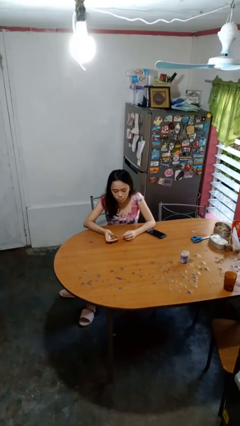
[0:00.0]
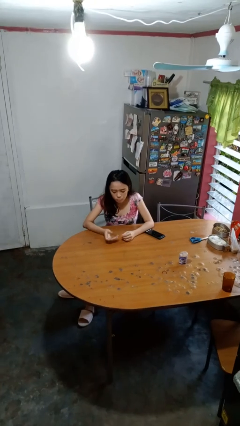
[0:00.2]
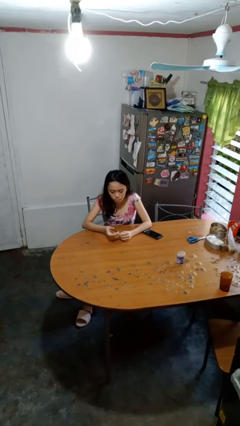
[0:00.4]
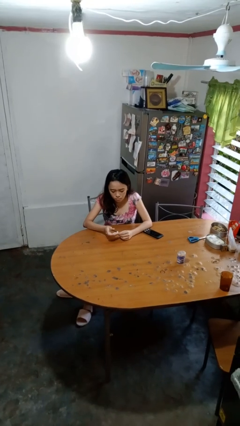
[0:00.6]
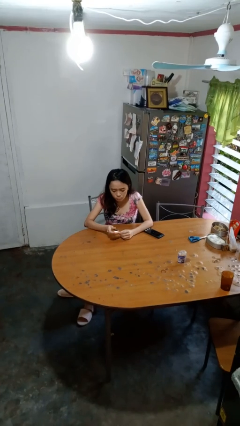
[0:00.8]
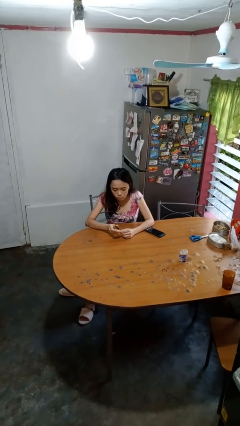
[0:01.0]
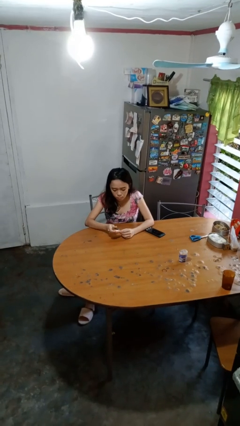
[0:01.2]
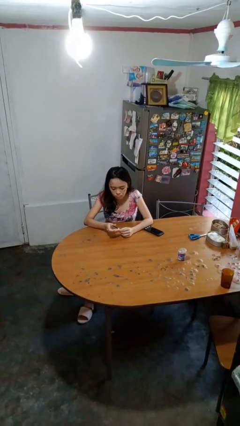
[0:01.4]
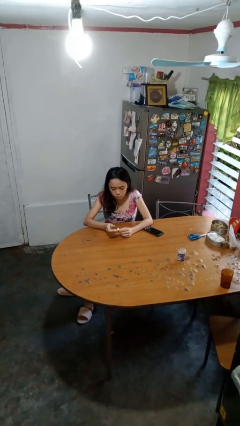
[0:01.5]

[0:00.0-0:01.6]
person clips fingernails

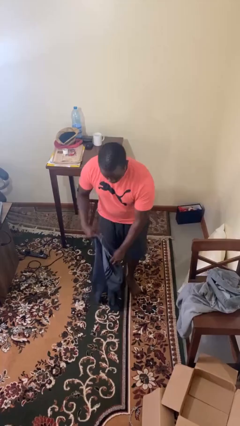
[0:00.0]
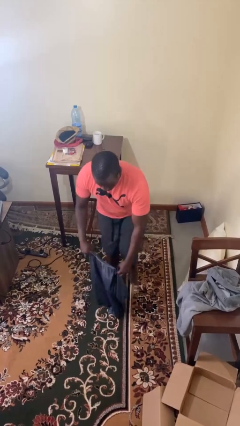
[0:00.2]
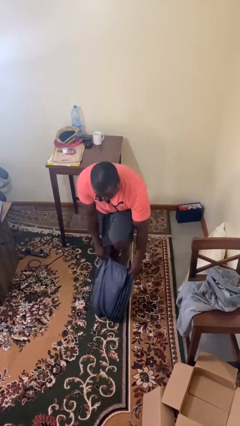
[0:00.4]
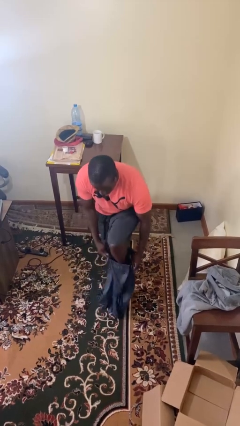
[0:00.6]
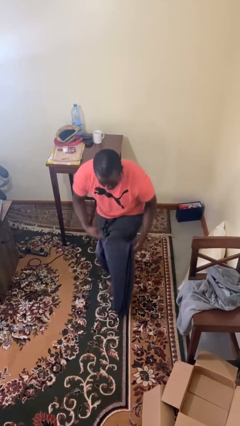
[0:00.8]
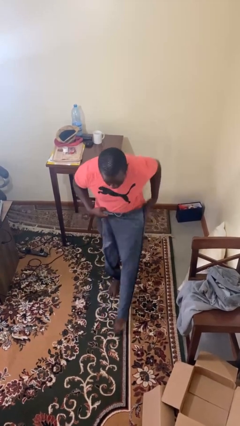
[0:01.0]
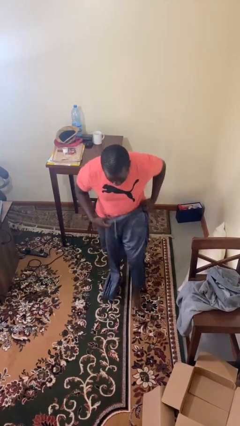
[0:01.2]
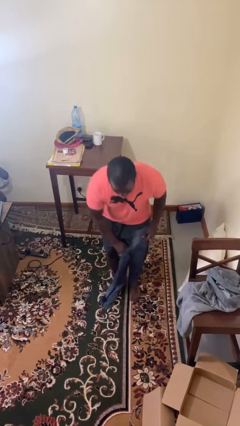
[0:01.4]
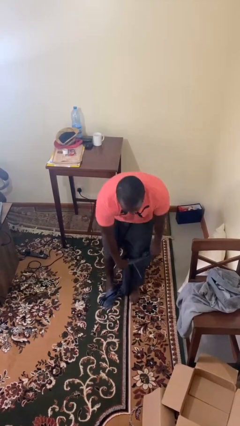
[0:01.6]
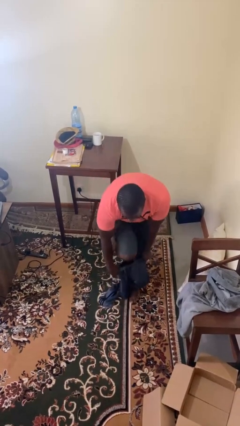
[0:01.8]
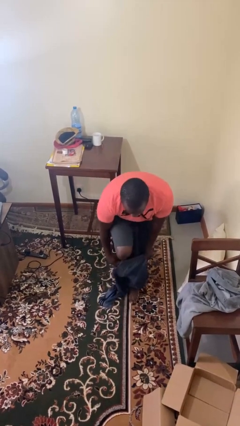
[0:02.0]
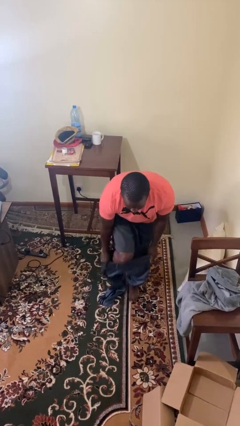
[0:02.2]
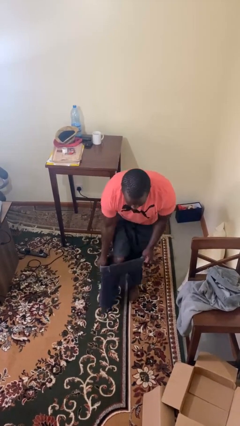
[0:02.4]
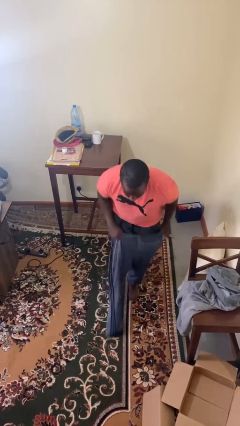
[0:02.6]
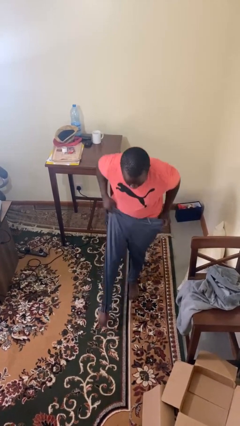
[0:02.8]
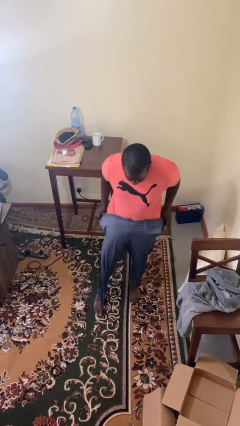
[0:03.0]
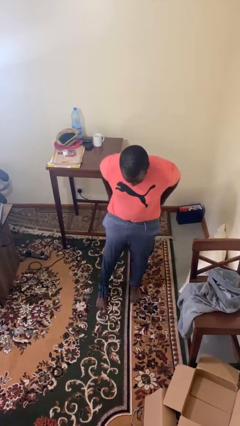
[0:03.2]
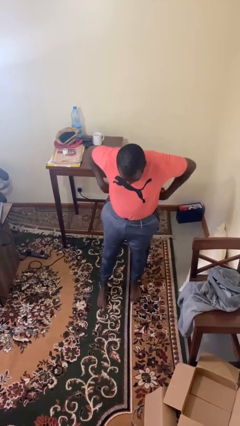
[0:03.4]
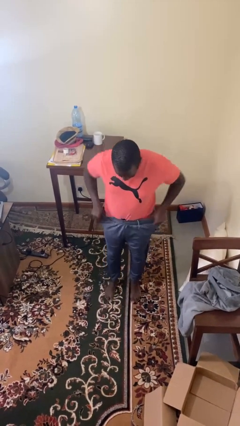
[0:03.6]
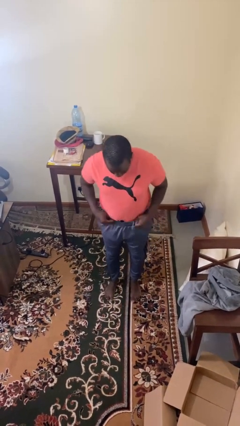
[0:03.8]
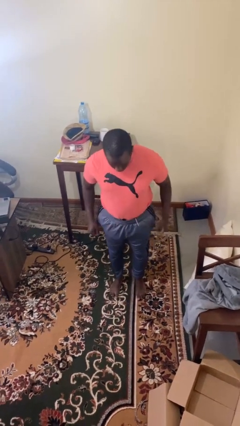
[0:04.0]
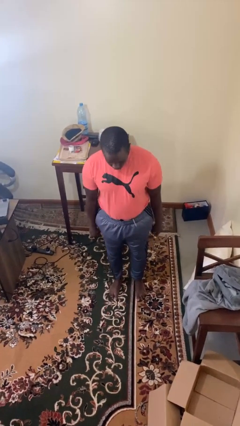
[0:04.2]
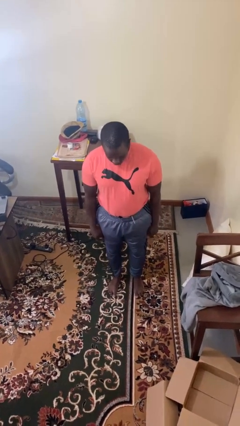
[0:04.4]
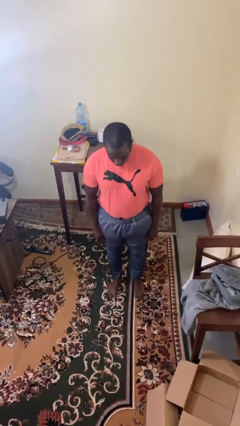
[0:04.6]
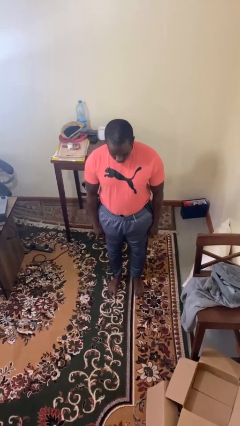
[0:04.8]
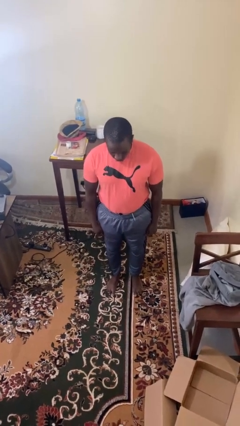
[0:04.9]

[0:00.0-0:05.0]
person puts on pants

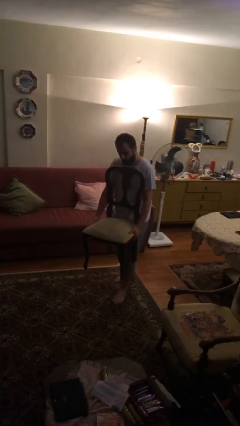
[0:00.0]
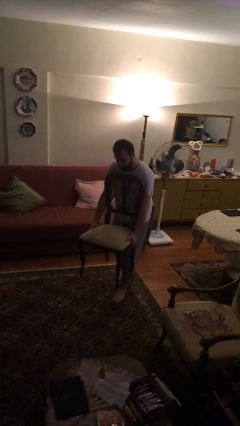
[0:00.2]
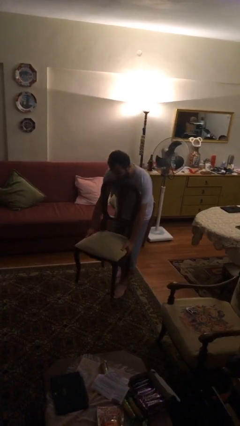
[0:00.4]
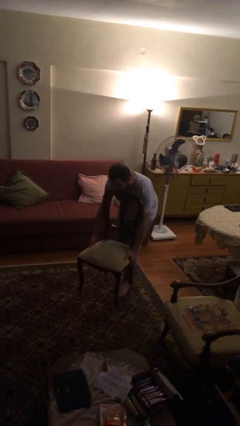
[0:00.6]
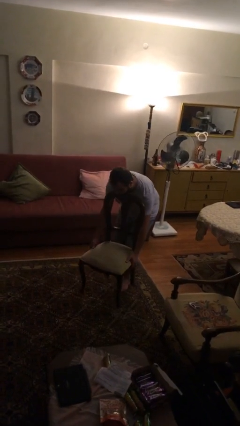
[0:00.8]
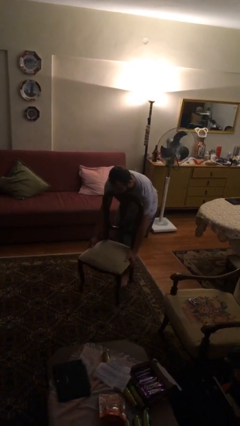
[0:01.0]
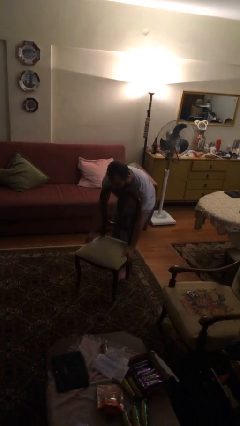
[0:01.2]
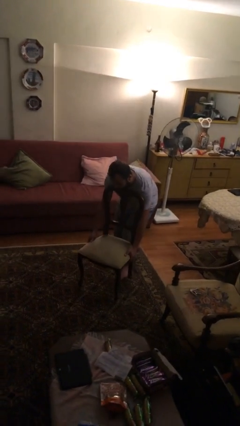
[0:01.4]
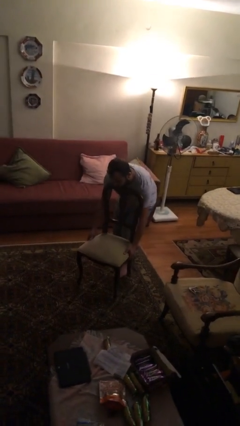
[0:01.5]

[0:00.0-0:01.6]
person puts down object on floor

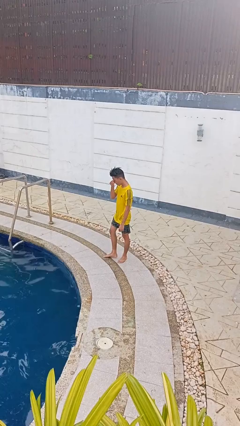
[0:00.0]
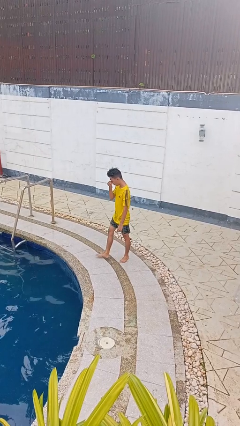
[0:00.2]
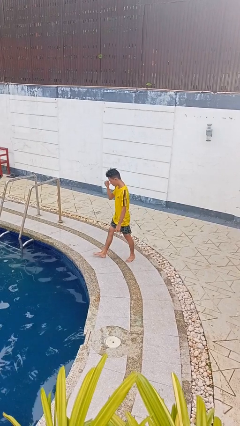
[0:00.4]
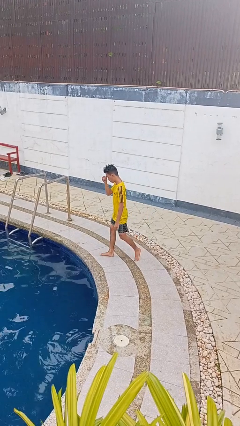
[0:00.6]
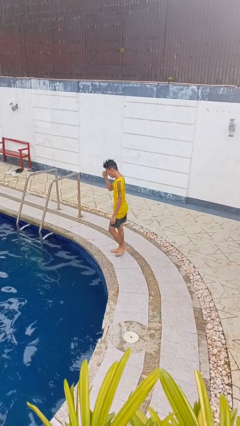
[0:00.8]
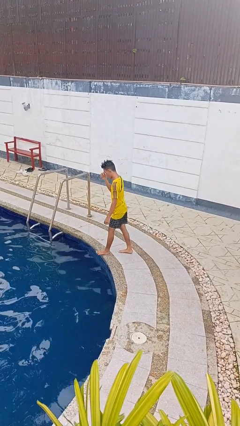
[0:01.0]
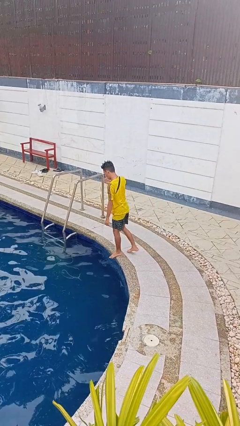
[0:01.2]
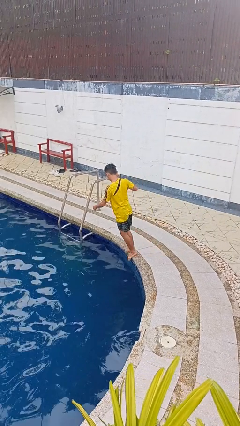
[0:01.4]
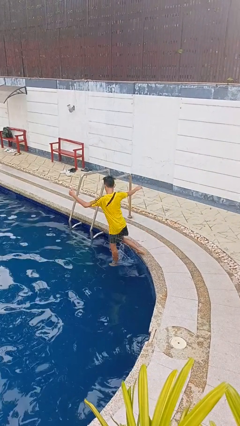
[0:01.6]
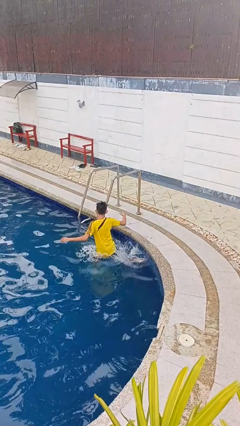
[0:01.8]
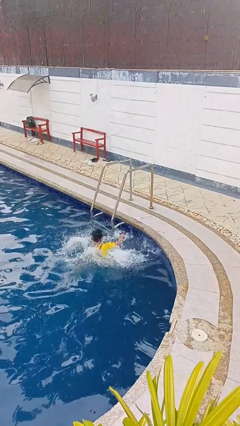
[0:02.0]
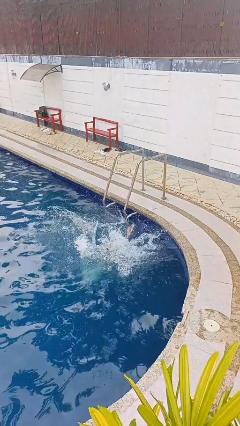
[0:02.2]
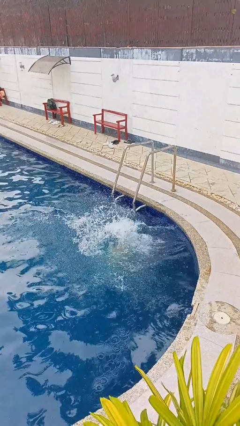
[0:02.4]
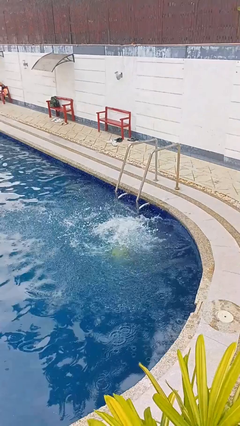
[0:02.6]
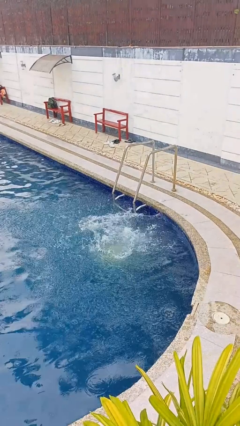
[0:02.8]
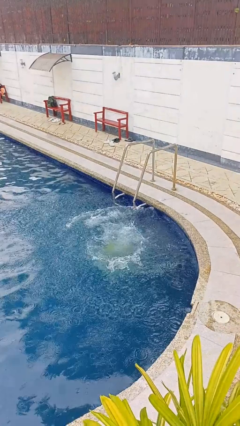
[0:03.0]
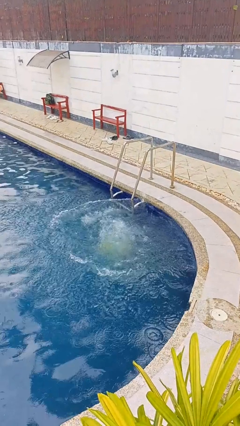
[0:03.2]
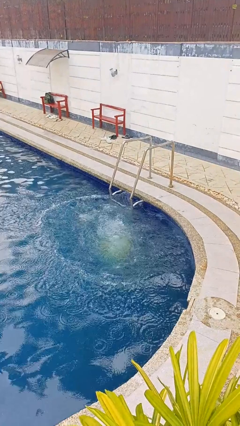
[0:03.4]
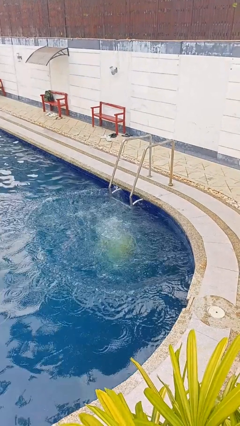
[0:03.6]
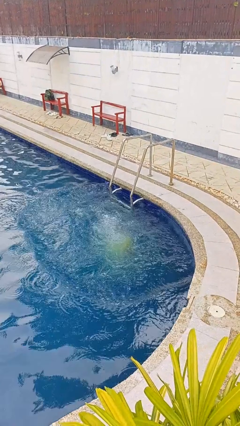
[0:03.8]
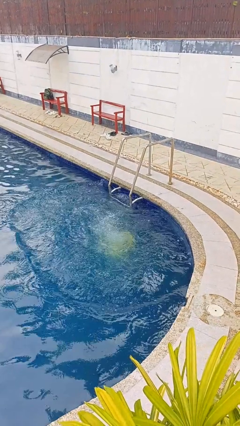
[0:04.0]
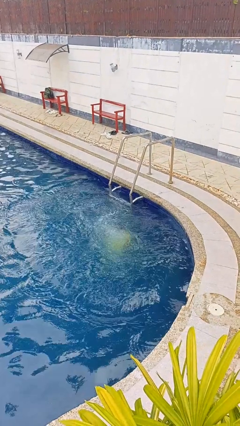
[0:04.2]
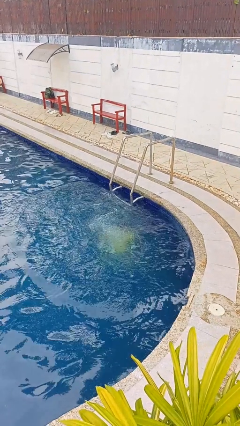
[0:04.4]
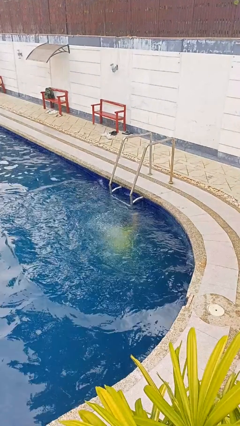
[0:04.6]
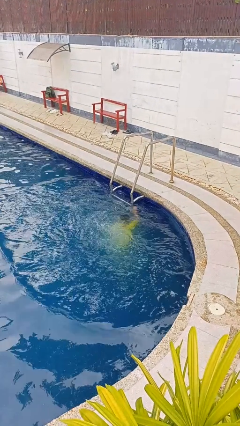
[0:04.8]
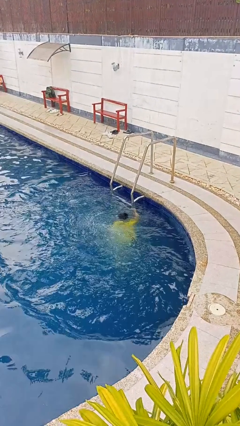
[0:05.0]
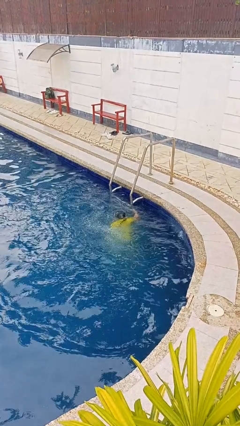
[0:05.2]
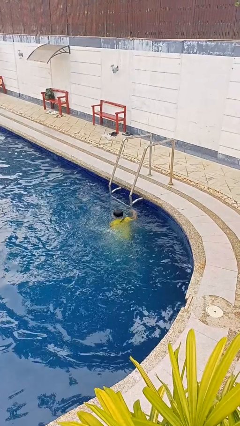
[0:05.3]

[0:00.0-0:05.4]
person falls into pool

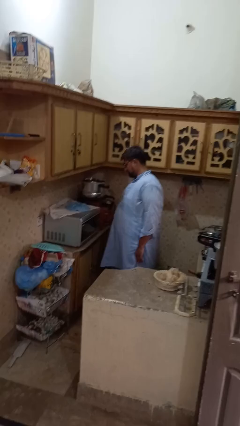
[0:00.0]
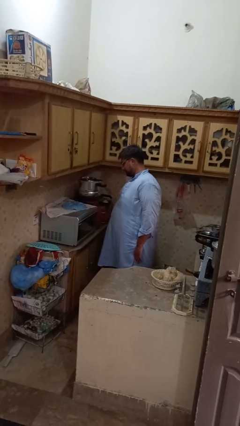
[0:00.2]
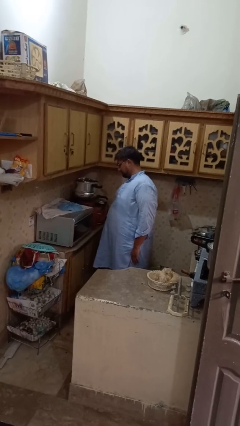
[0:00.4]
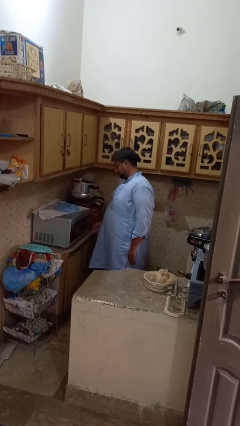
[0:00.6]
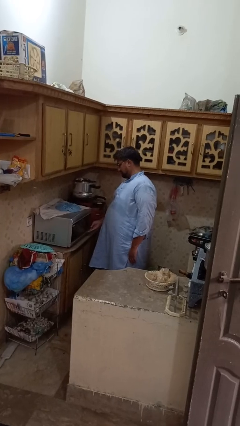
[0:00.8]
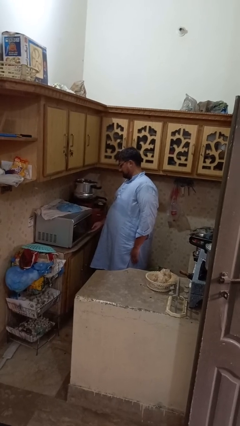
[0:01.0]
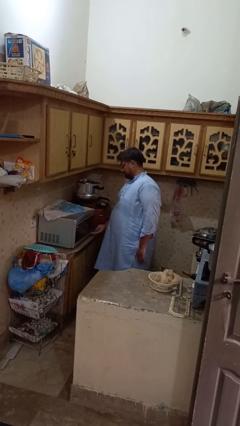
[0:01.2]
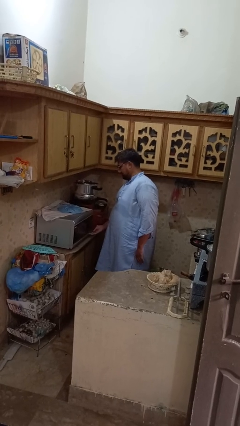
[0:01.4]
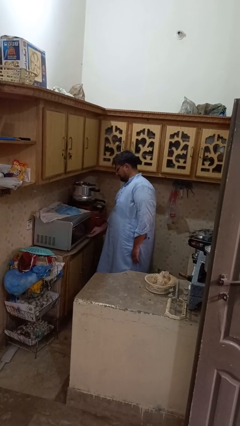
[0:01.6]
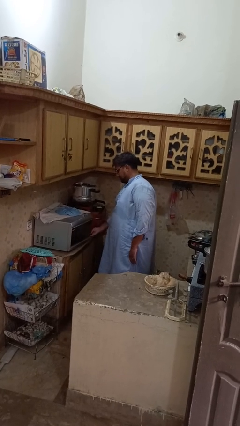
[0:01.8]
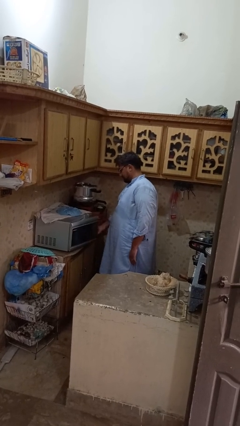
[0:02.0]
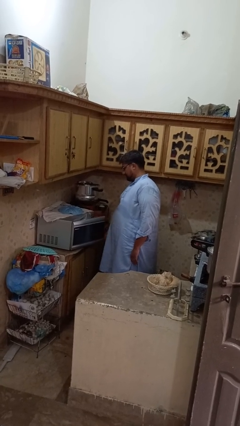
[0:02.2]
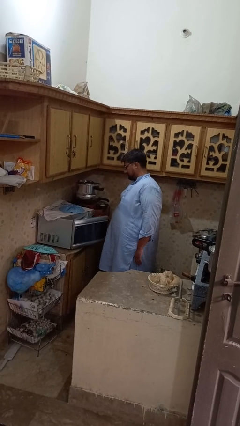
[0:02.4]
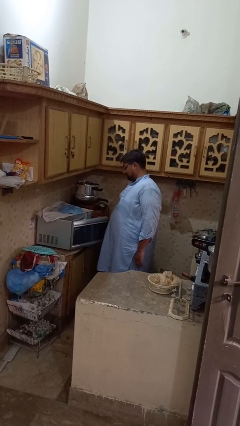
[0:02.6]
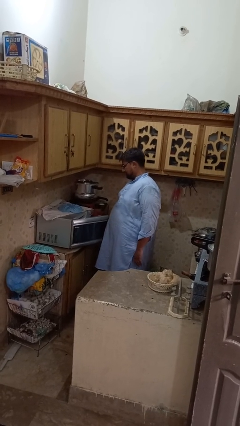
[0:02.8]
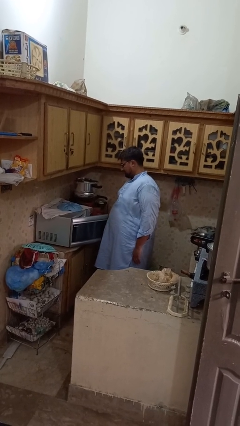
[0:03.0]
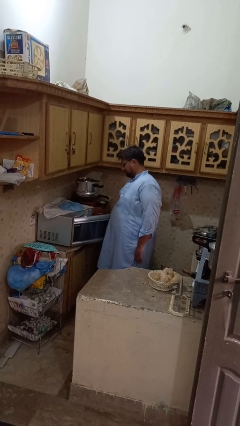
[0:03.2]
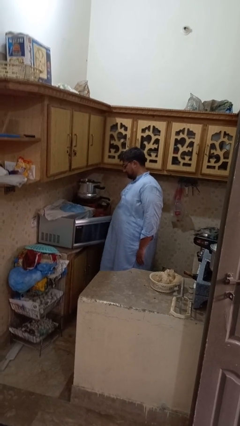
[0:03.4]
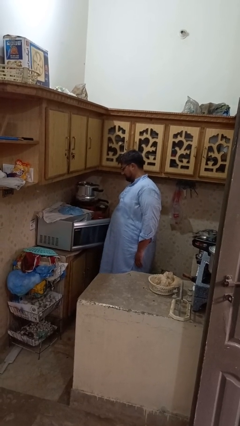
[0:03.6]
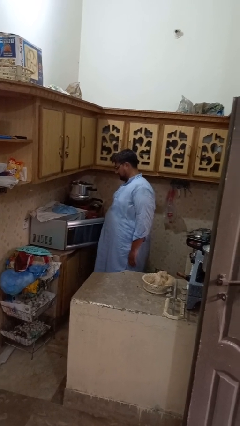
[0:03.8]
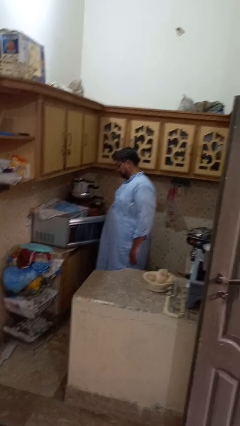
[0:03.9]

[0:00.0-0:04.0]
person opens microwave
